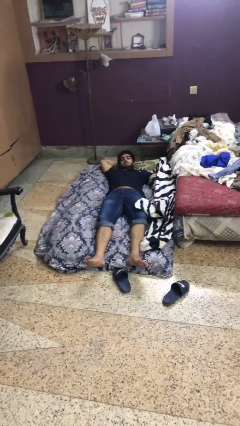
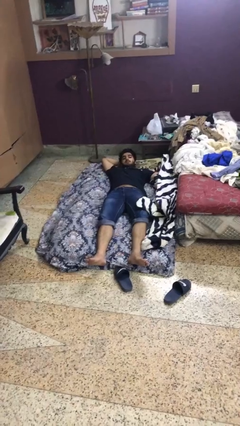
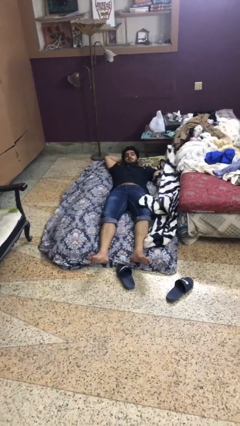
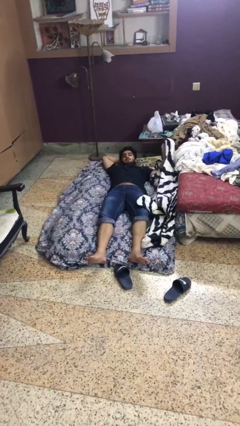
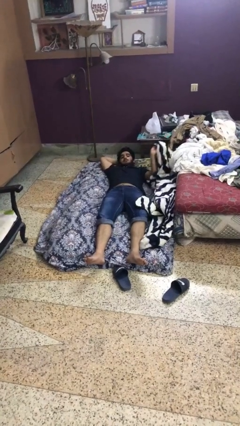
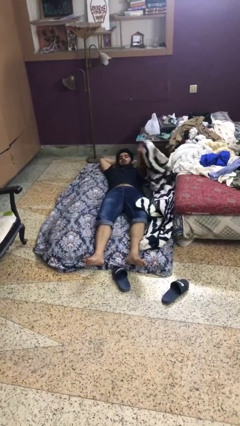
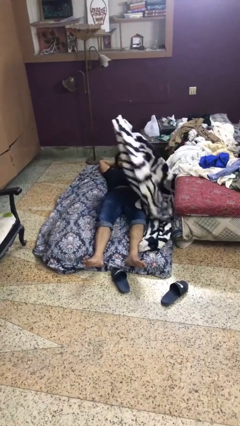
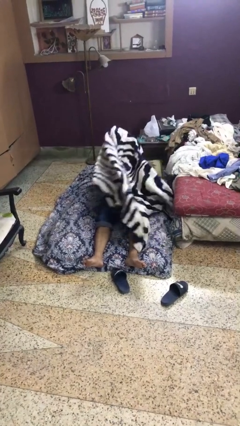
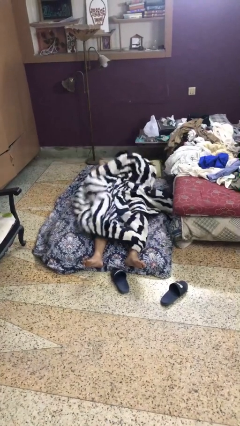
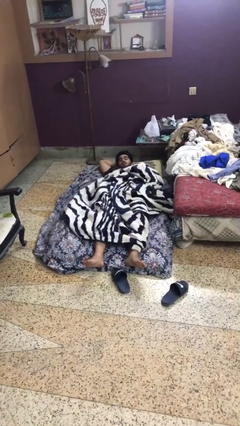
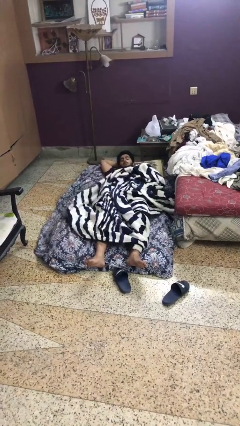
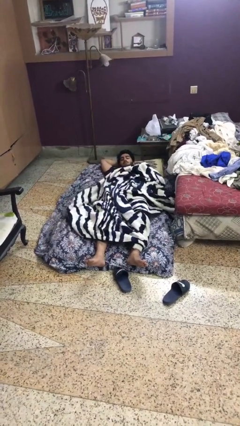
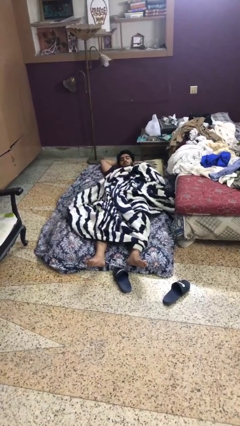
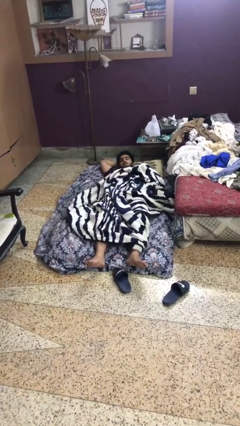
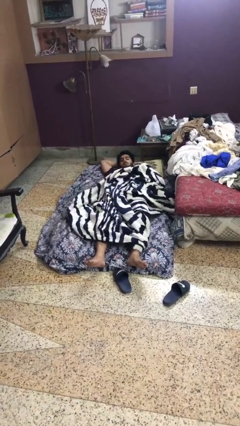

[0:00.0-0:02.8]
person covers with blanket

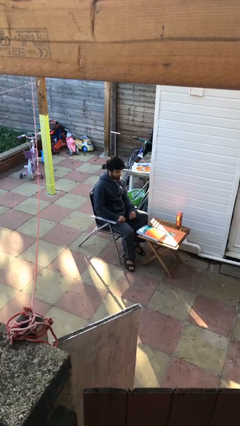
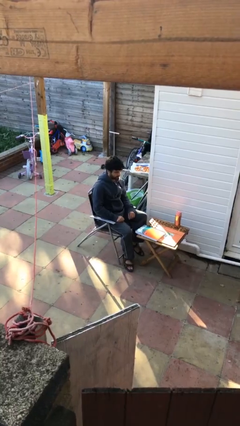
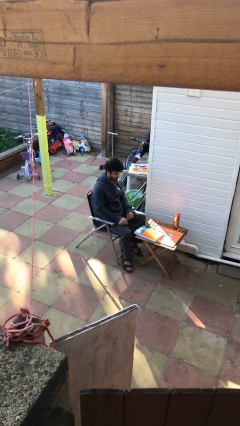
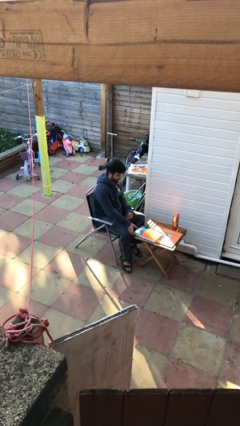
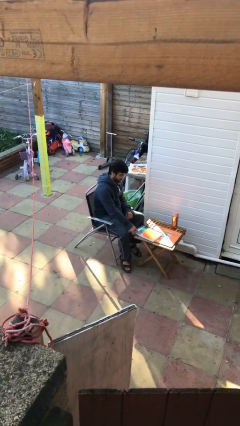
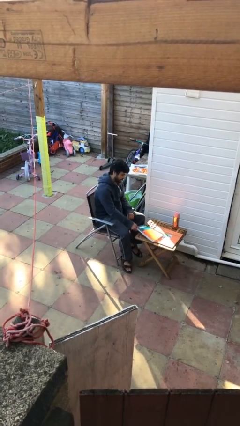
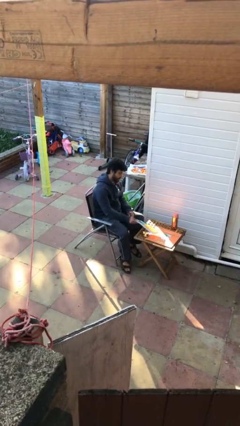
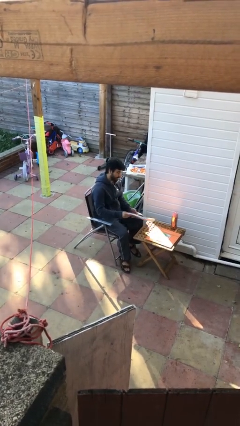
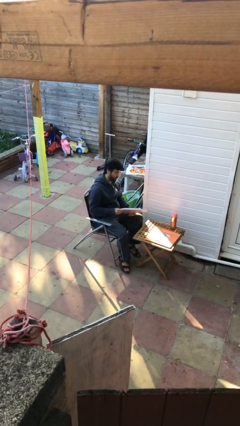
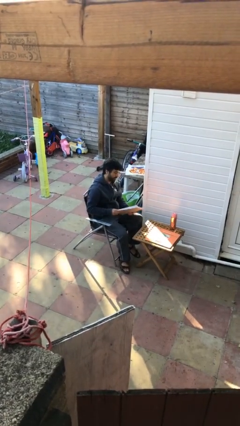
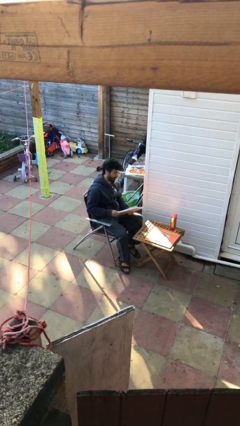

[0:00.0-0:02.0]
person picks up object from table

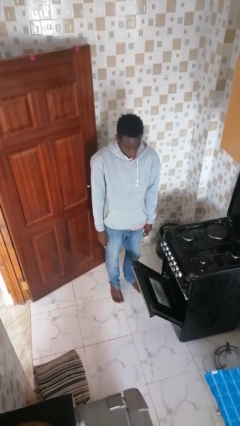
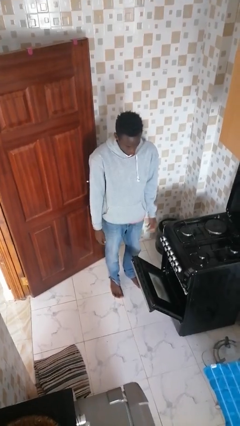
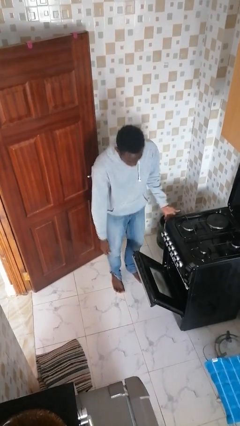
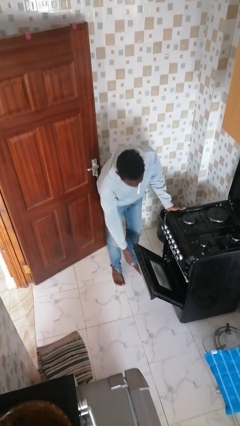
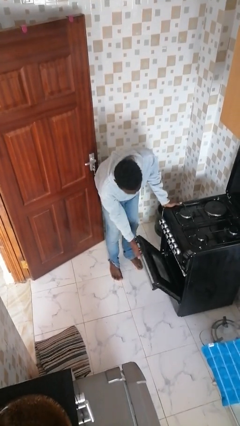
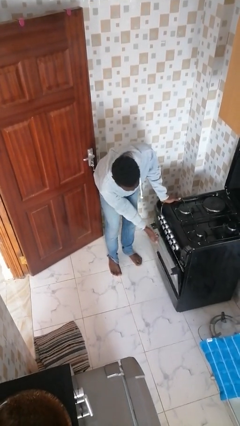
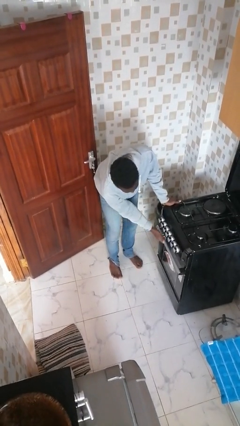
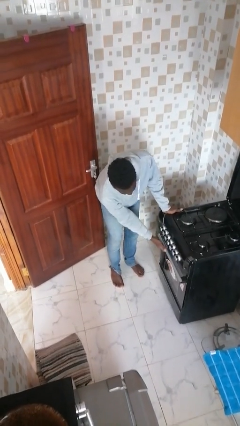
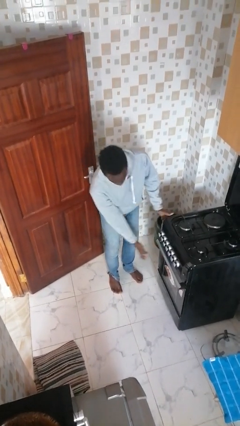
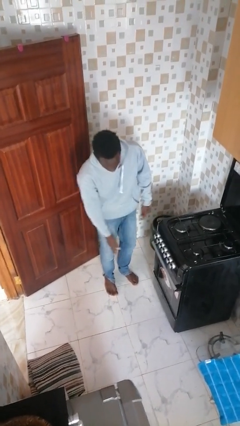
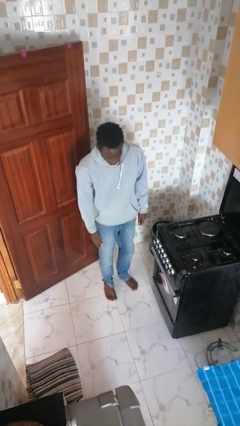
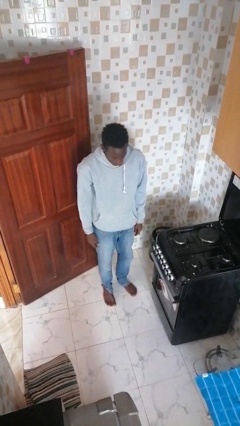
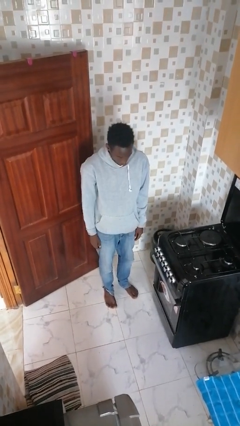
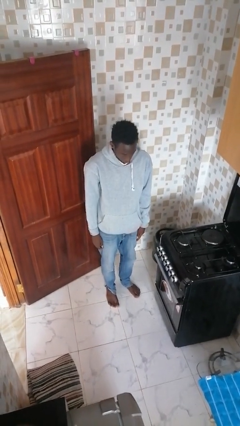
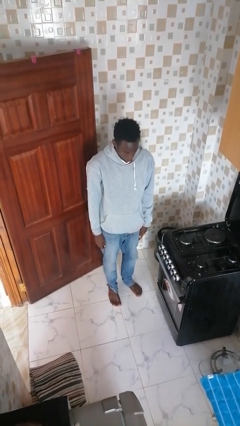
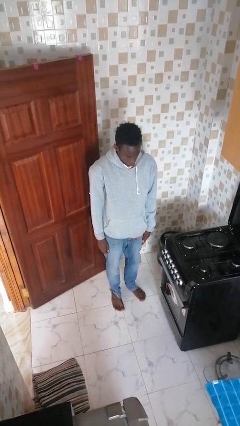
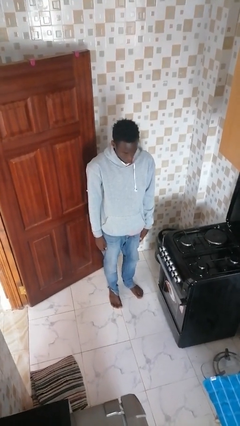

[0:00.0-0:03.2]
person closes oven door

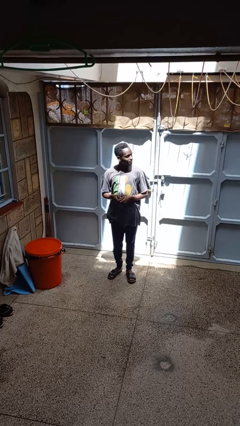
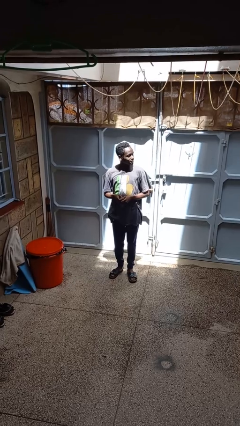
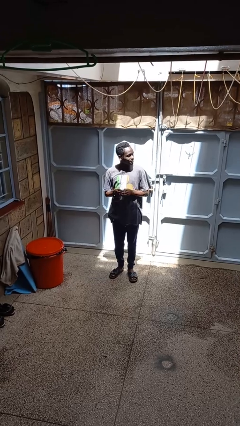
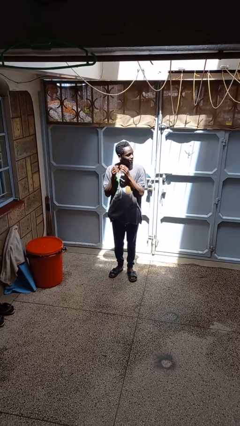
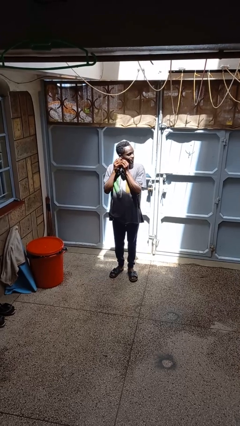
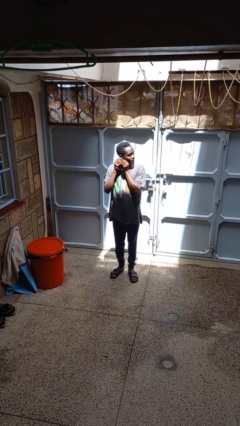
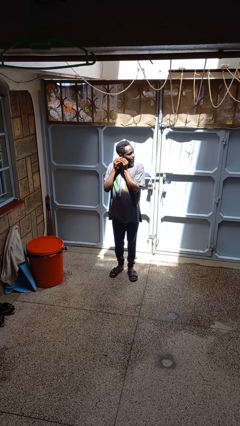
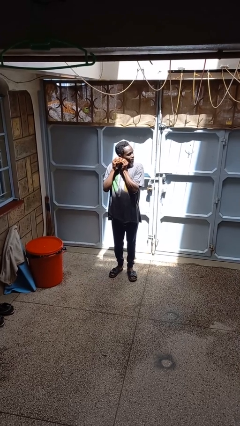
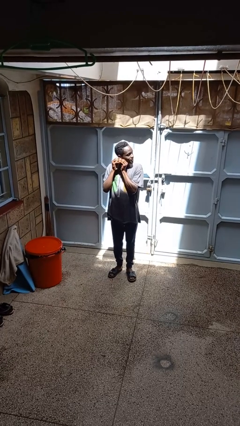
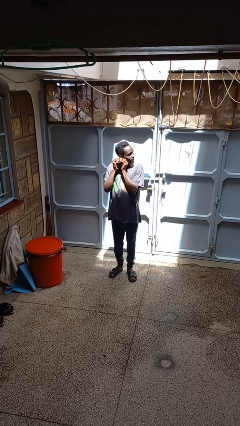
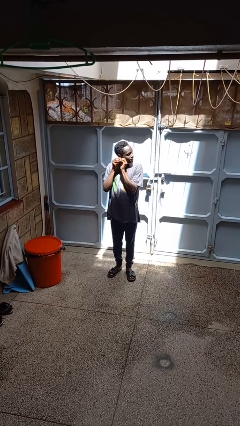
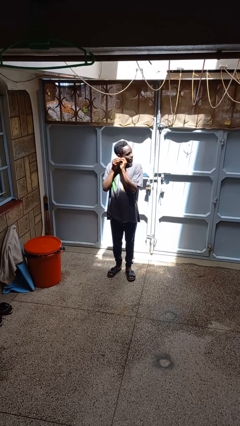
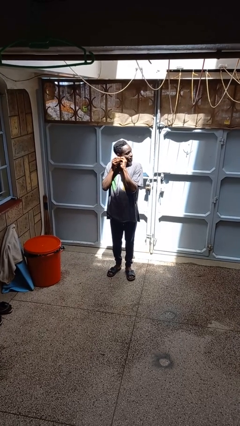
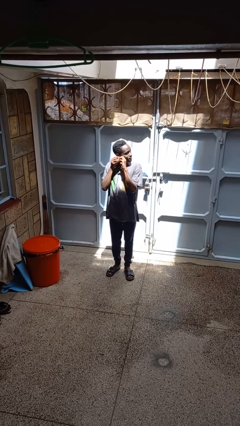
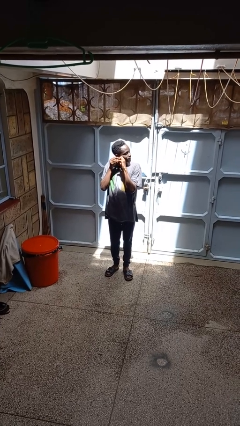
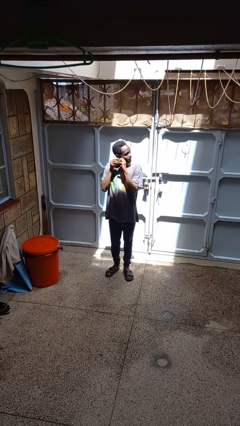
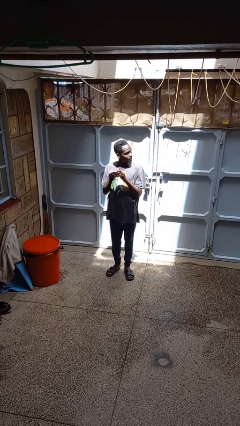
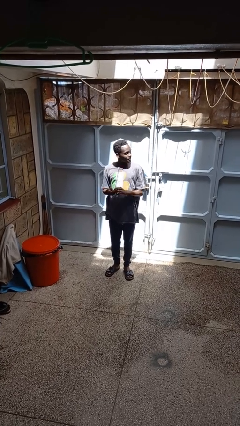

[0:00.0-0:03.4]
person takes off earrings

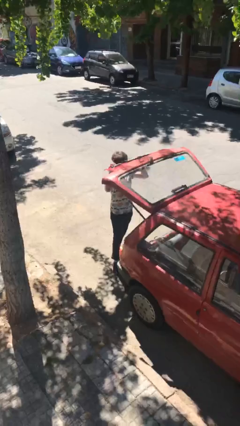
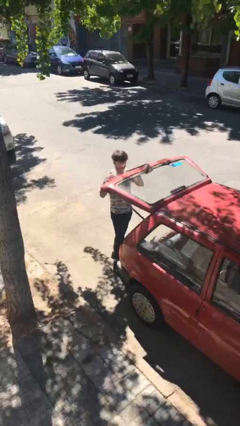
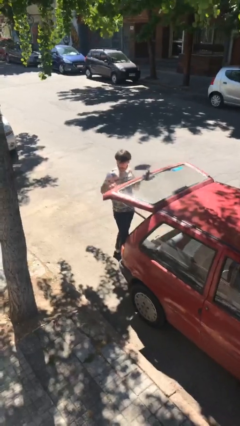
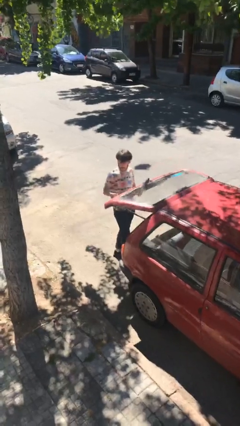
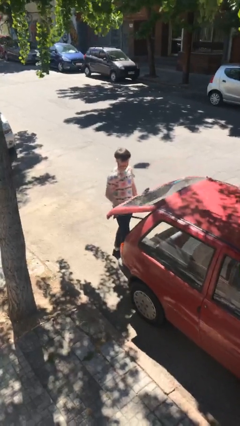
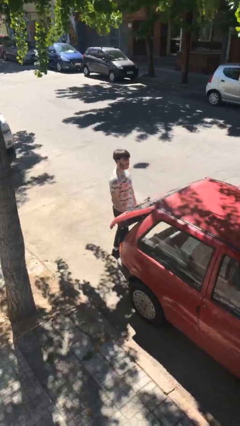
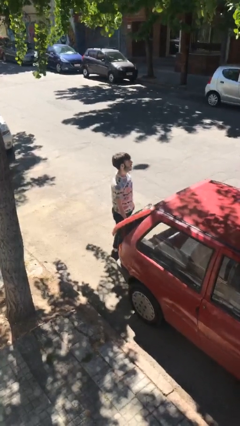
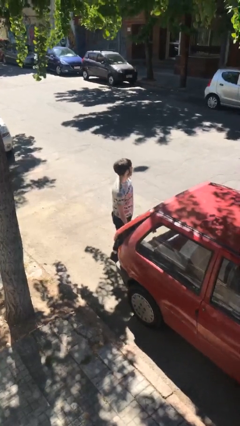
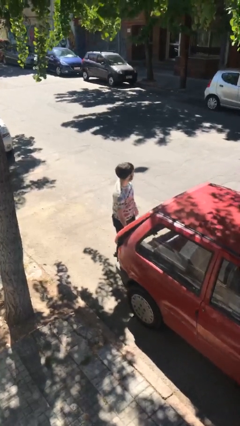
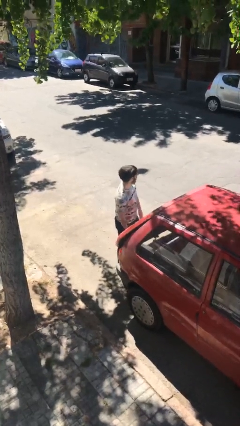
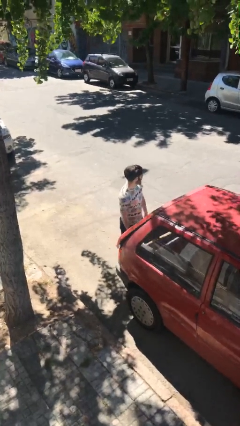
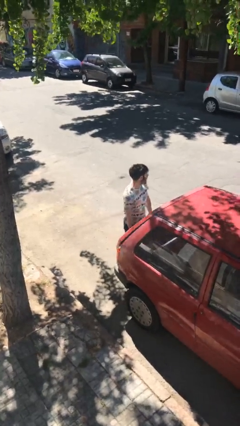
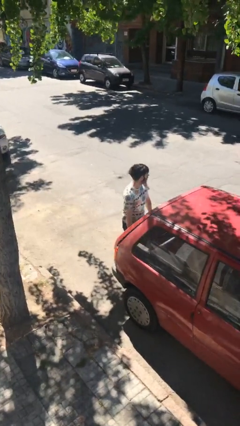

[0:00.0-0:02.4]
person closes car trunk

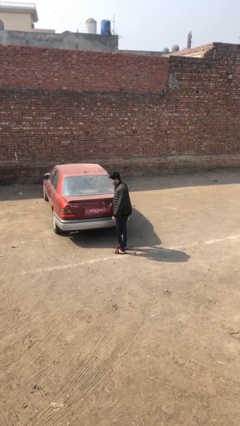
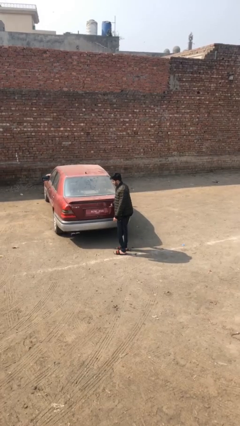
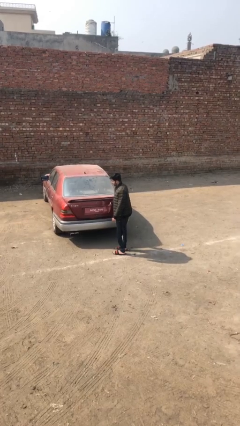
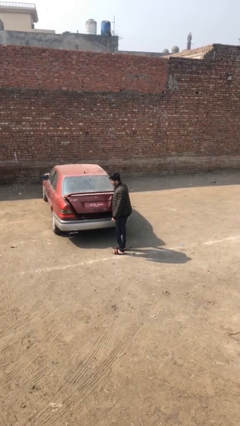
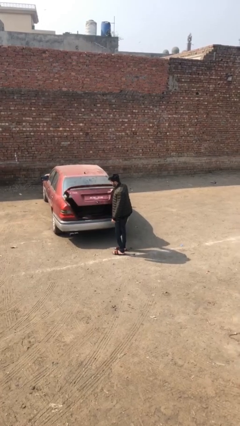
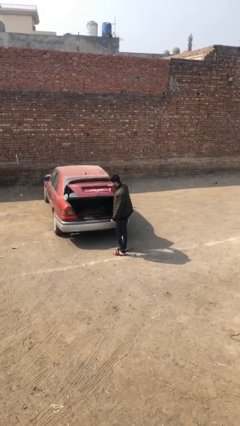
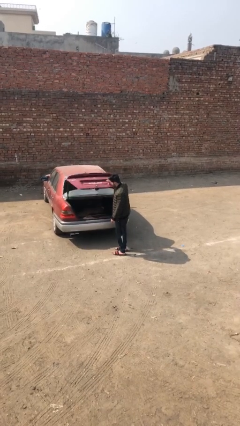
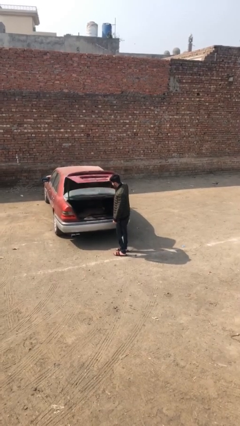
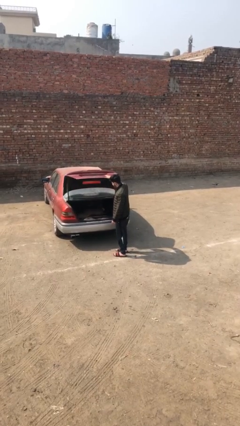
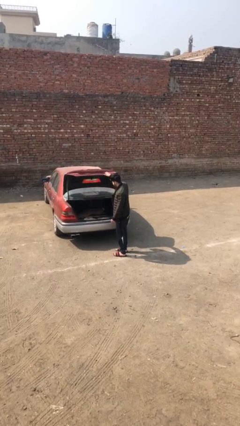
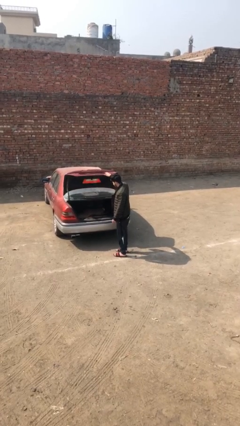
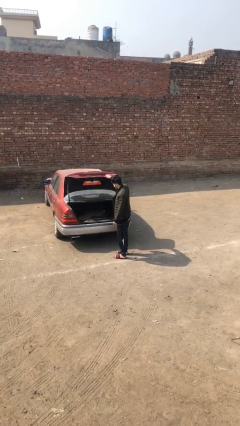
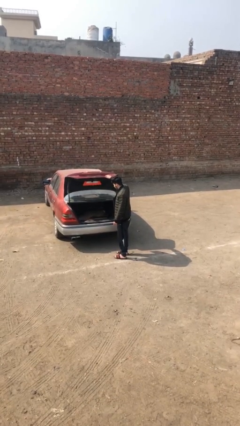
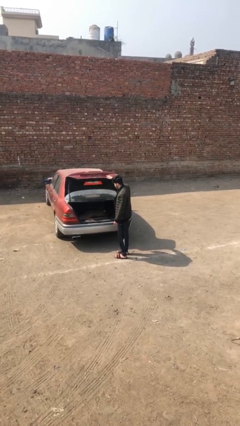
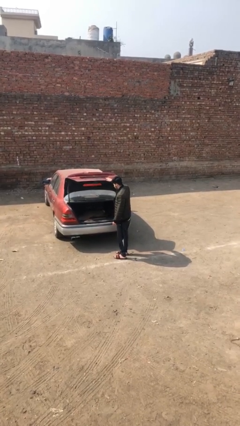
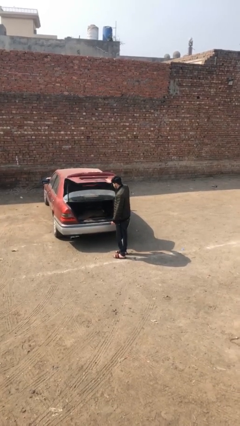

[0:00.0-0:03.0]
person opens car trunk

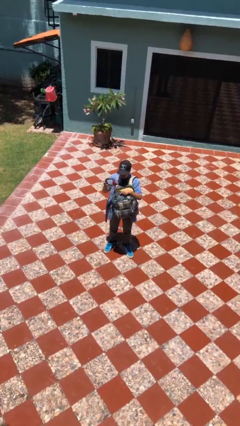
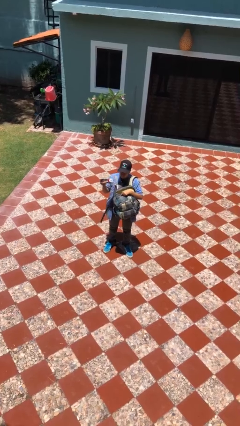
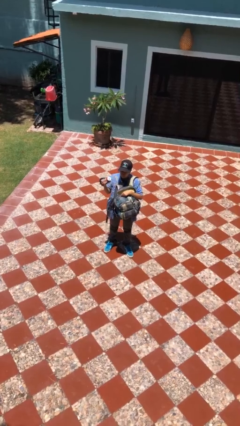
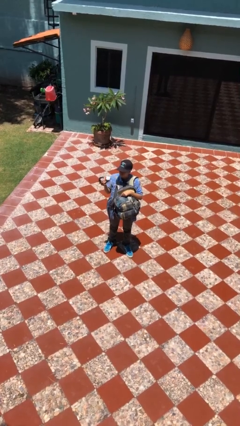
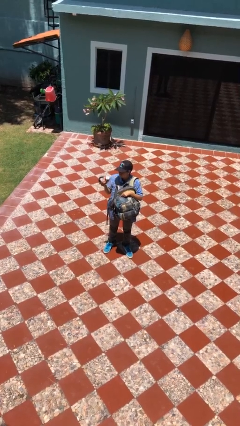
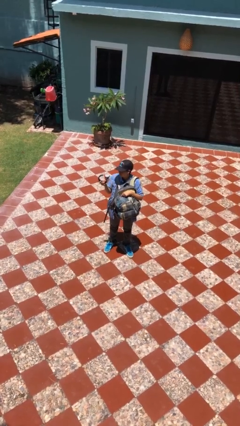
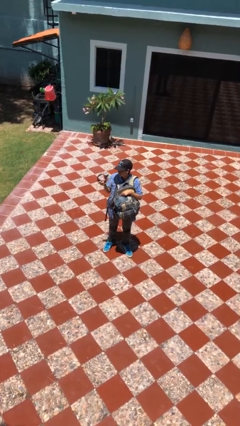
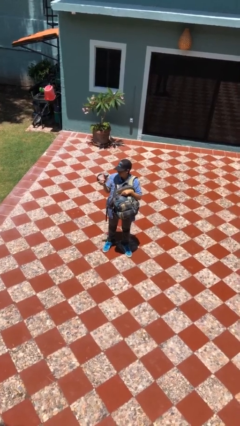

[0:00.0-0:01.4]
person takes object from backpack
